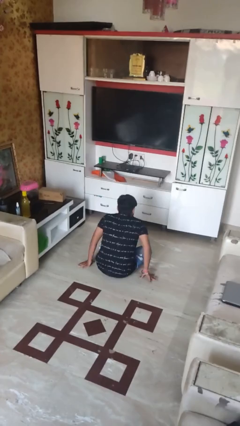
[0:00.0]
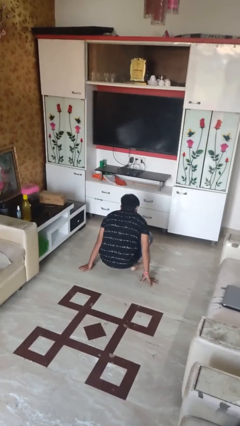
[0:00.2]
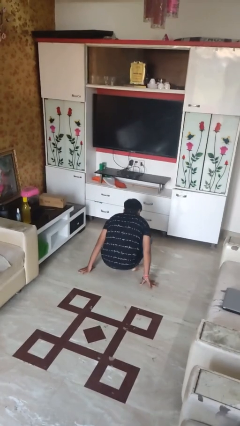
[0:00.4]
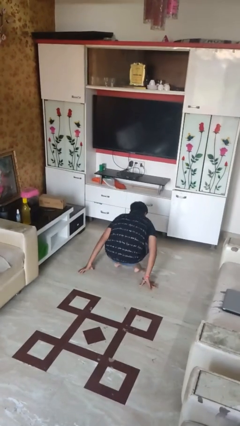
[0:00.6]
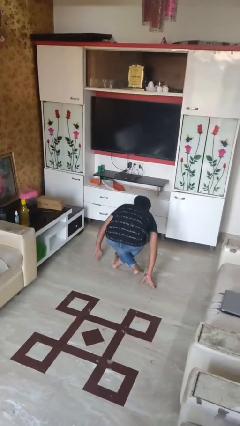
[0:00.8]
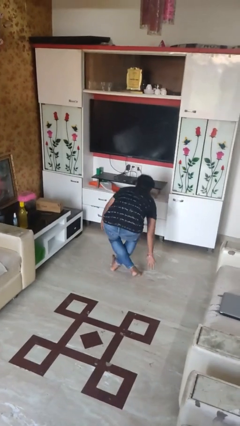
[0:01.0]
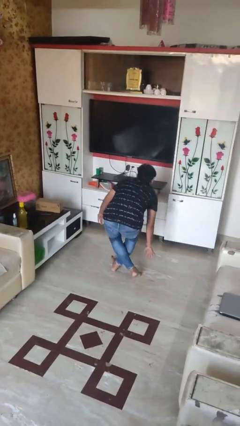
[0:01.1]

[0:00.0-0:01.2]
person stands up from floor

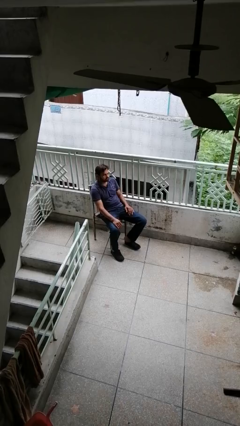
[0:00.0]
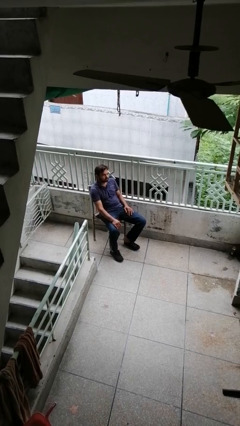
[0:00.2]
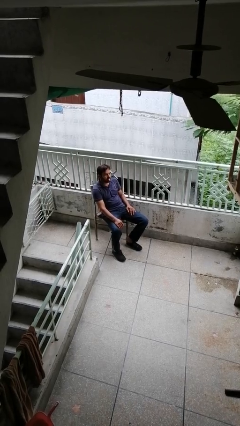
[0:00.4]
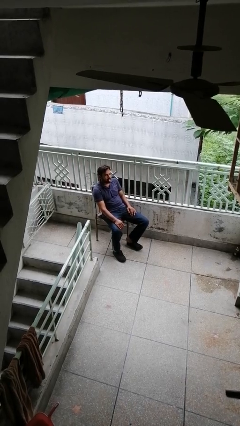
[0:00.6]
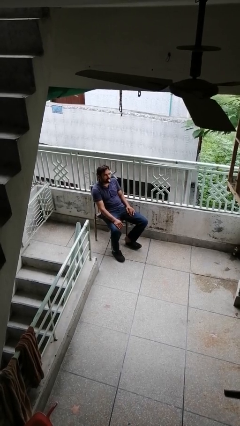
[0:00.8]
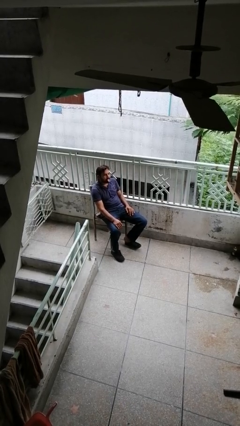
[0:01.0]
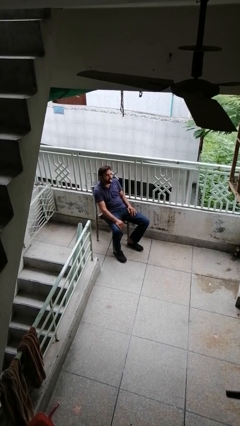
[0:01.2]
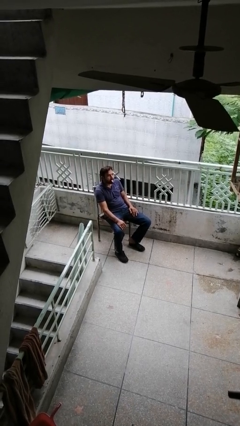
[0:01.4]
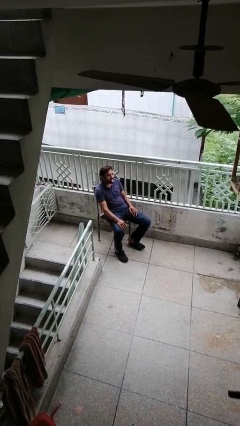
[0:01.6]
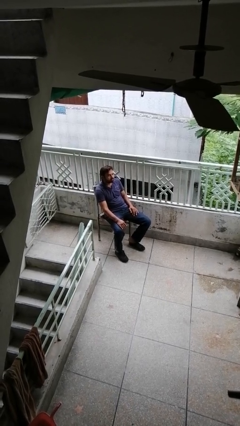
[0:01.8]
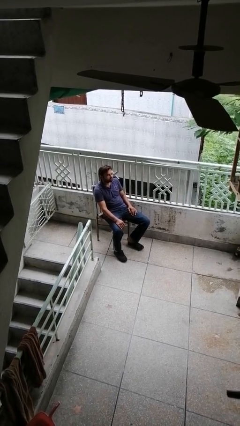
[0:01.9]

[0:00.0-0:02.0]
person sticks out tongue

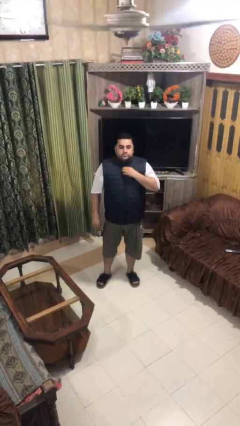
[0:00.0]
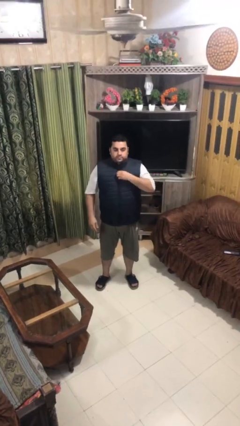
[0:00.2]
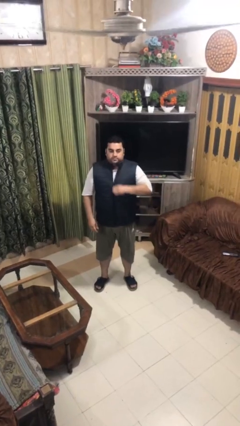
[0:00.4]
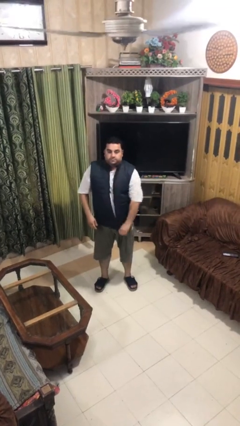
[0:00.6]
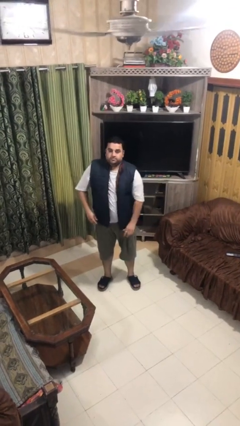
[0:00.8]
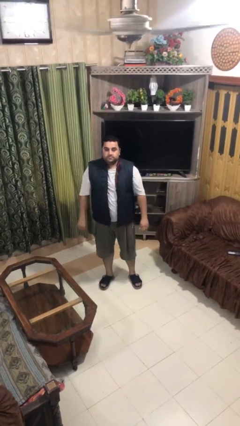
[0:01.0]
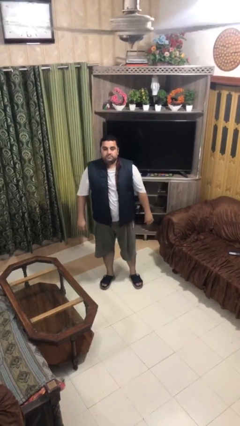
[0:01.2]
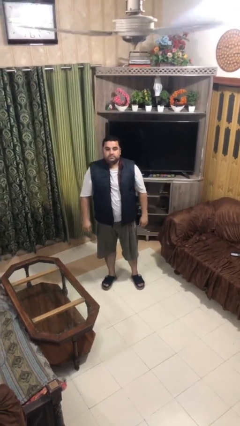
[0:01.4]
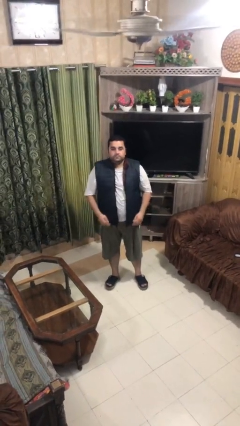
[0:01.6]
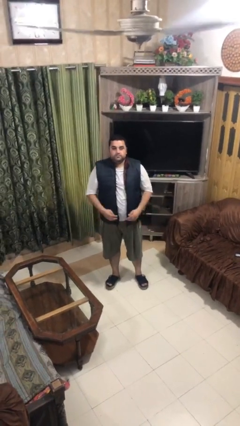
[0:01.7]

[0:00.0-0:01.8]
person unzips jacket

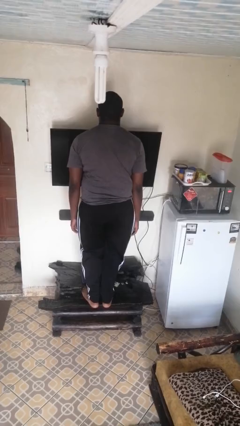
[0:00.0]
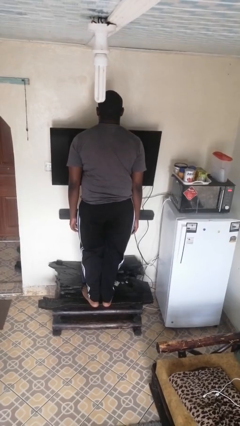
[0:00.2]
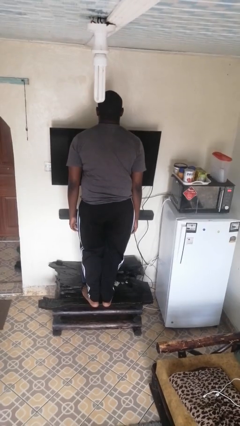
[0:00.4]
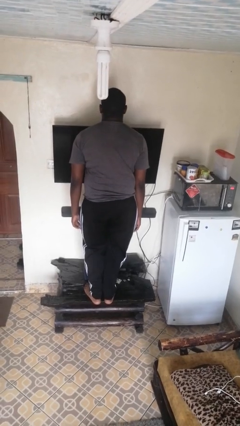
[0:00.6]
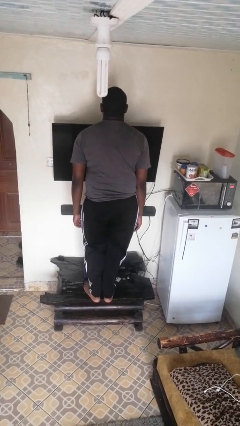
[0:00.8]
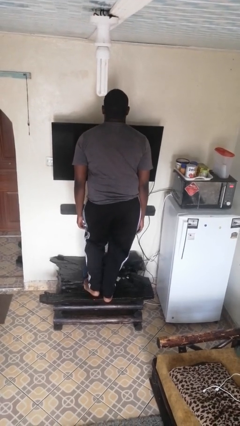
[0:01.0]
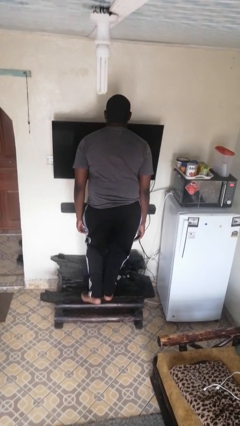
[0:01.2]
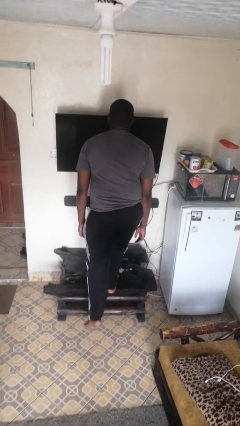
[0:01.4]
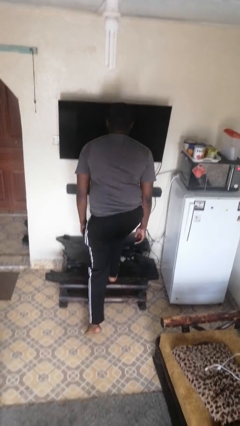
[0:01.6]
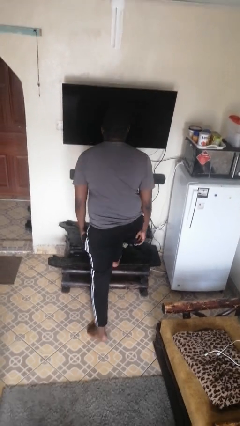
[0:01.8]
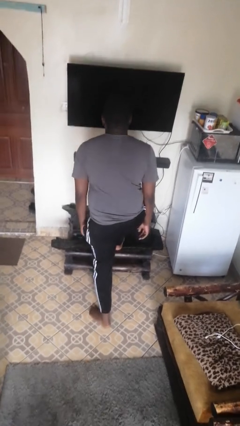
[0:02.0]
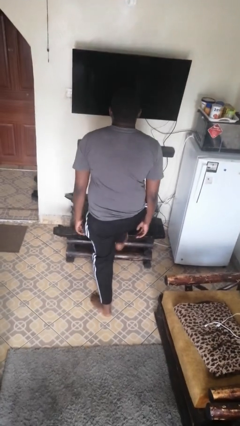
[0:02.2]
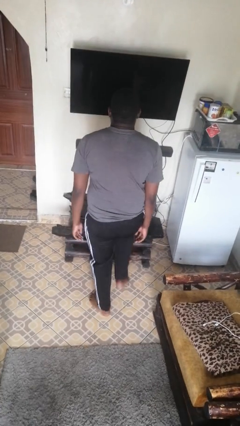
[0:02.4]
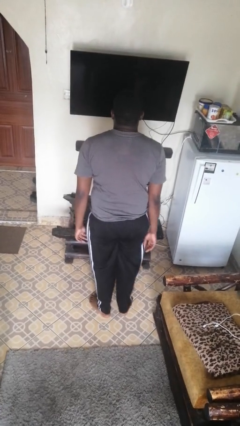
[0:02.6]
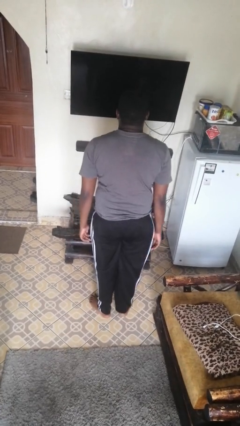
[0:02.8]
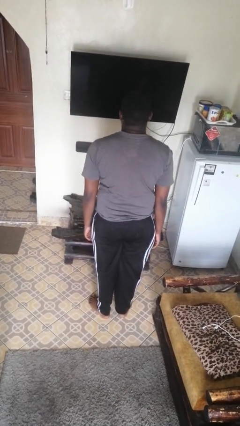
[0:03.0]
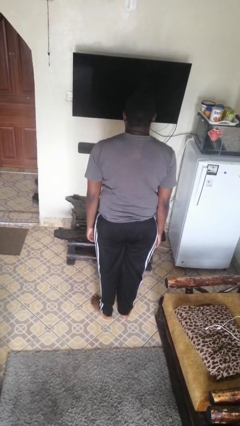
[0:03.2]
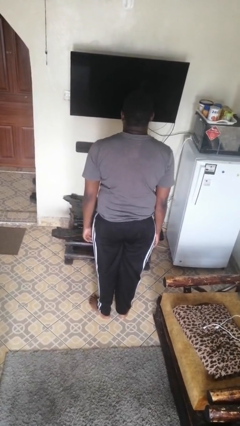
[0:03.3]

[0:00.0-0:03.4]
person climbs off table

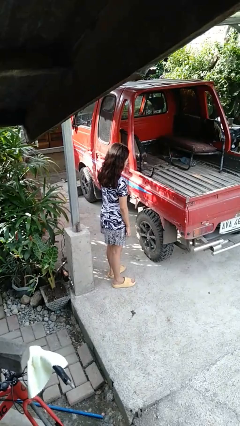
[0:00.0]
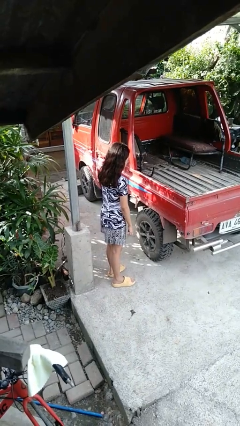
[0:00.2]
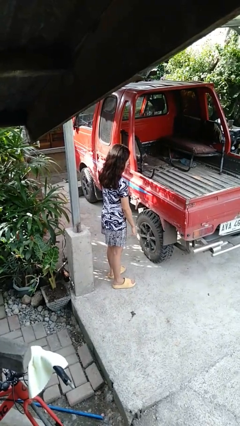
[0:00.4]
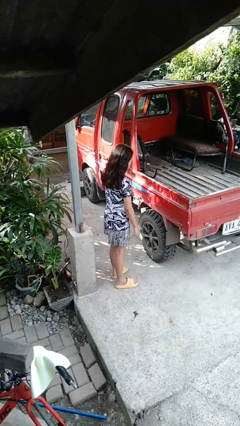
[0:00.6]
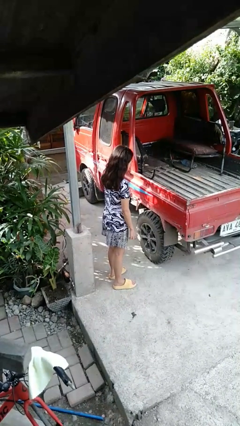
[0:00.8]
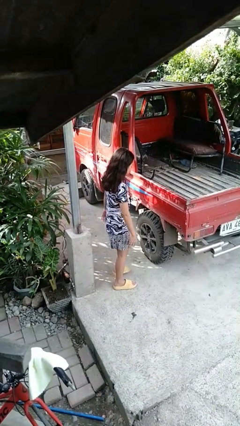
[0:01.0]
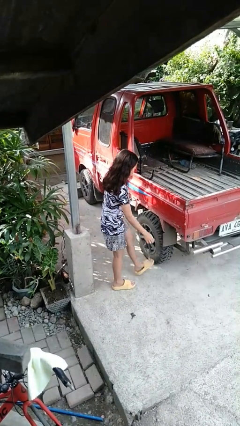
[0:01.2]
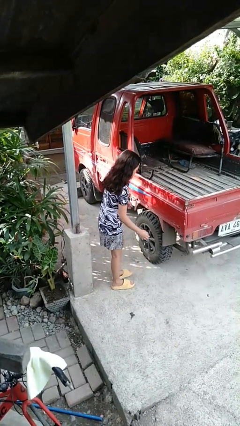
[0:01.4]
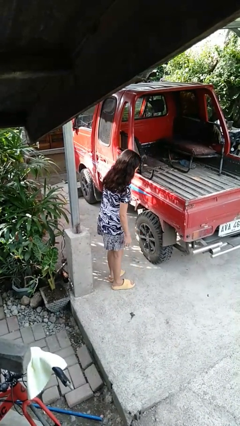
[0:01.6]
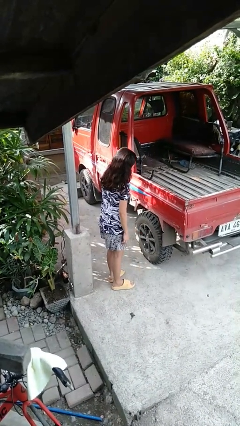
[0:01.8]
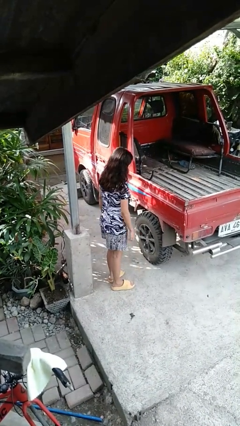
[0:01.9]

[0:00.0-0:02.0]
person kicks car tires

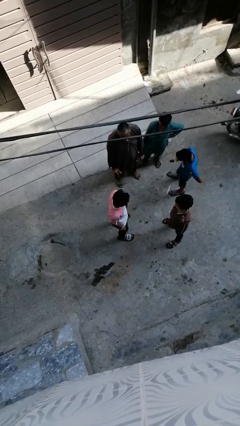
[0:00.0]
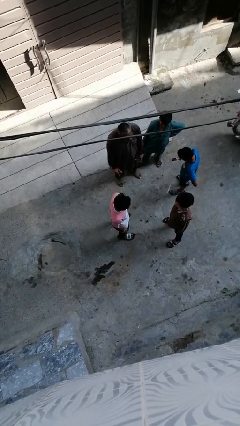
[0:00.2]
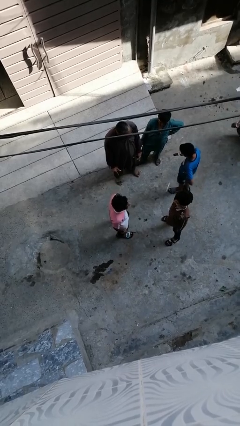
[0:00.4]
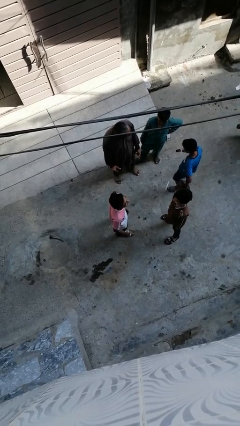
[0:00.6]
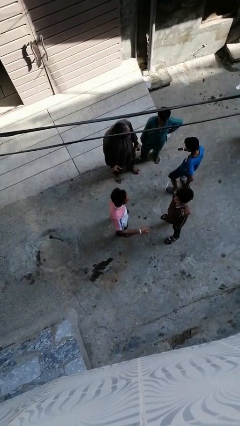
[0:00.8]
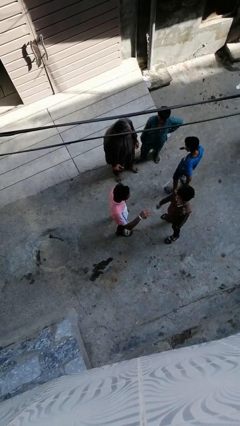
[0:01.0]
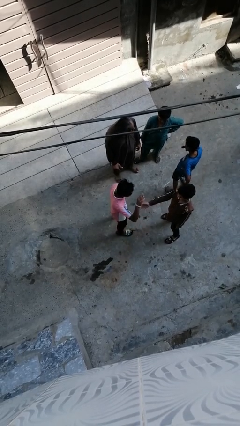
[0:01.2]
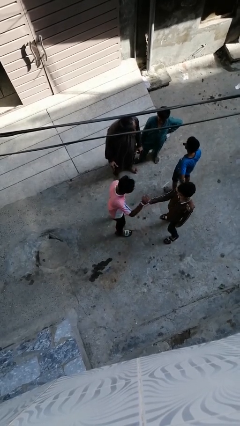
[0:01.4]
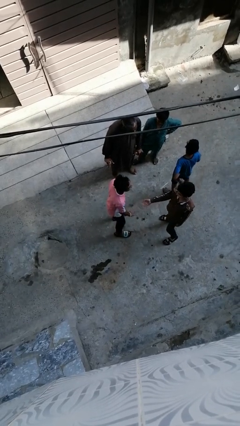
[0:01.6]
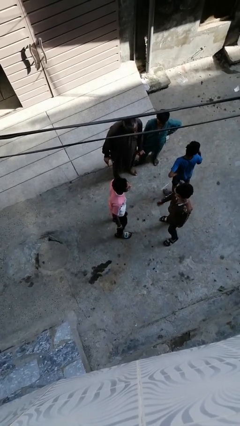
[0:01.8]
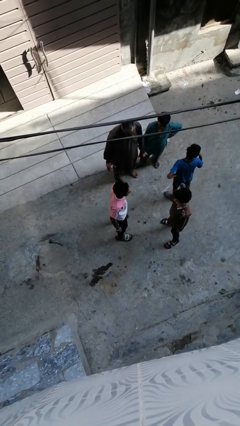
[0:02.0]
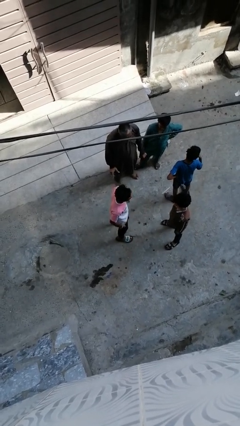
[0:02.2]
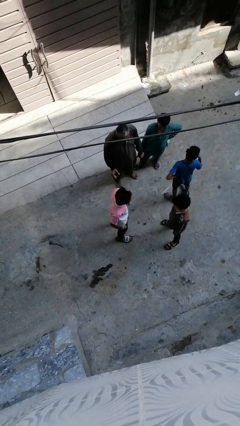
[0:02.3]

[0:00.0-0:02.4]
person laughs with person

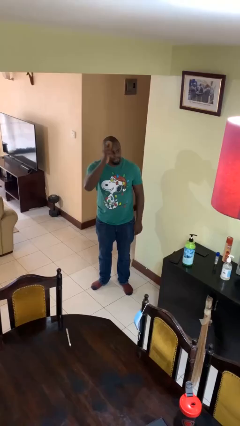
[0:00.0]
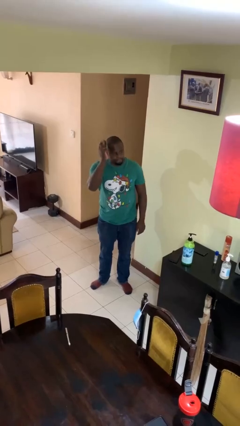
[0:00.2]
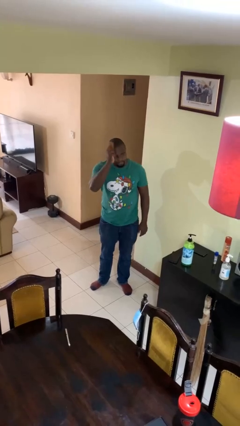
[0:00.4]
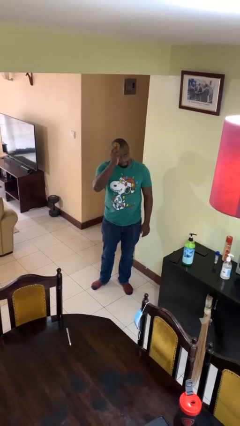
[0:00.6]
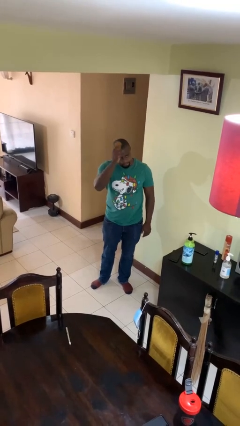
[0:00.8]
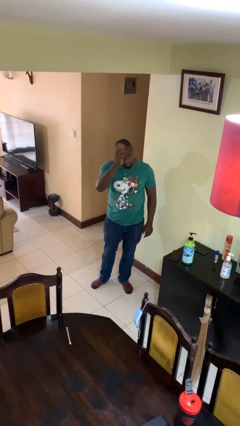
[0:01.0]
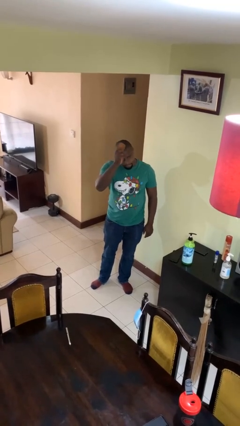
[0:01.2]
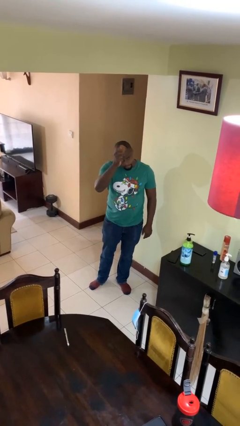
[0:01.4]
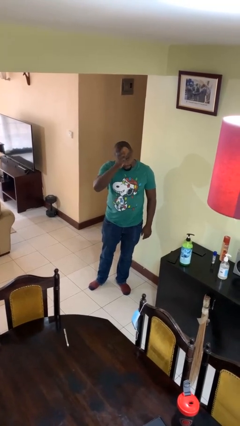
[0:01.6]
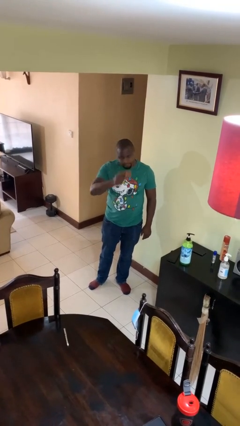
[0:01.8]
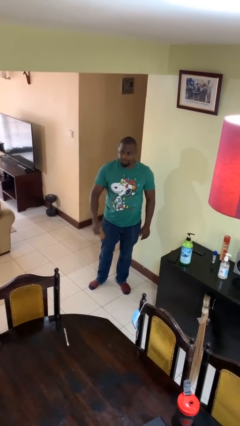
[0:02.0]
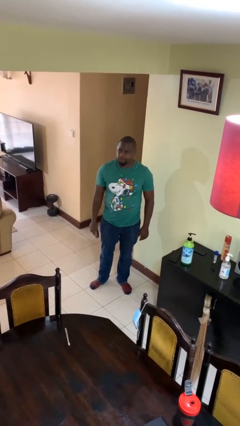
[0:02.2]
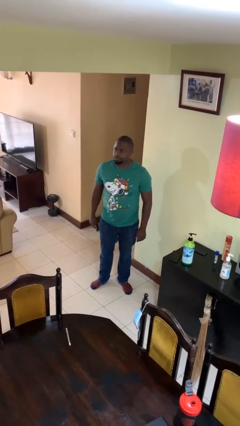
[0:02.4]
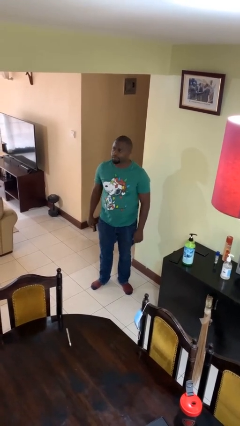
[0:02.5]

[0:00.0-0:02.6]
person brushes hair

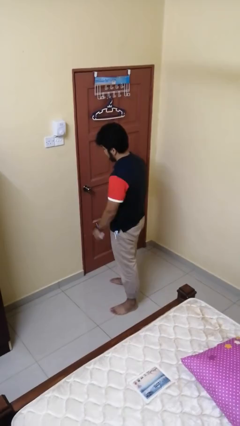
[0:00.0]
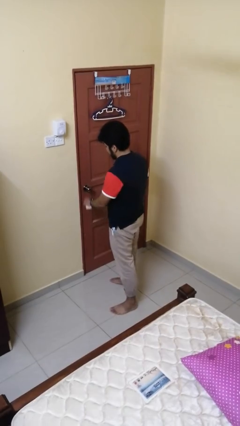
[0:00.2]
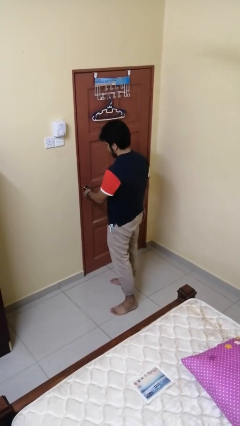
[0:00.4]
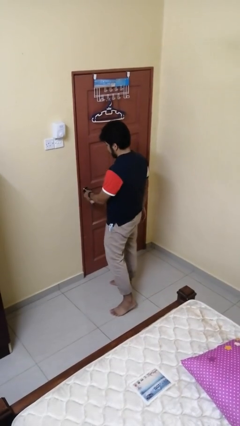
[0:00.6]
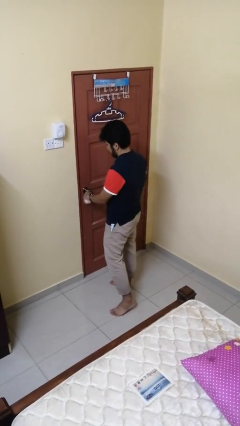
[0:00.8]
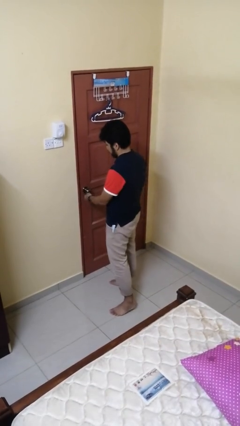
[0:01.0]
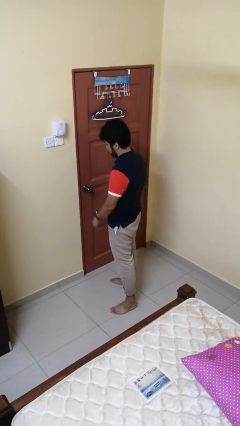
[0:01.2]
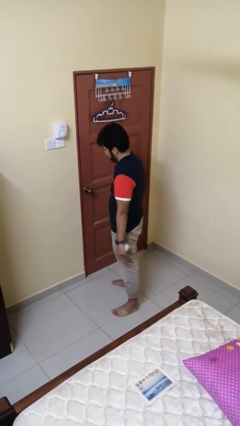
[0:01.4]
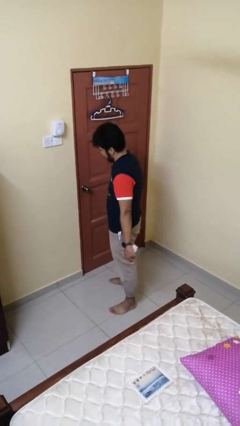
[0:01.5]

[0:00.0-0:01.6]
person unlocks door with keys
